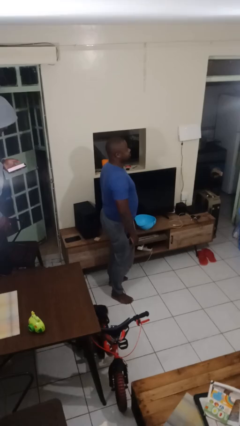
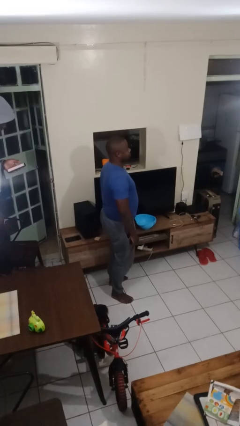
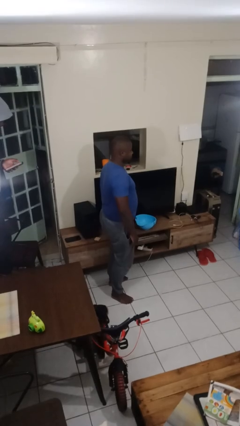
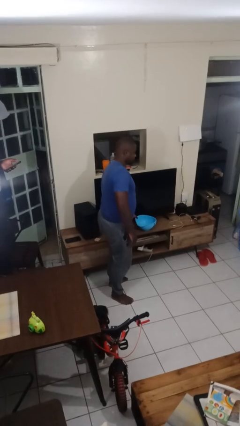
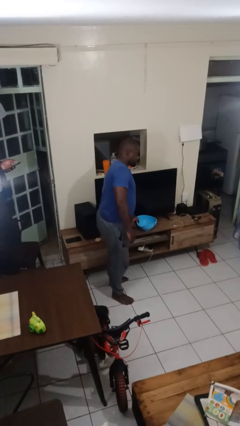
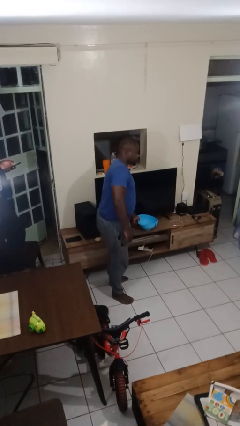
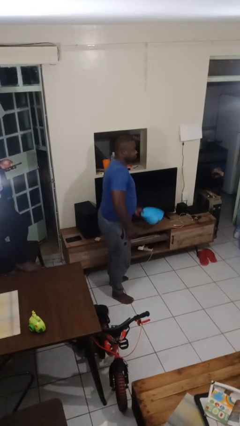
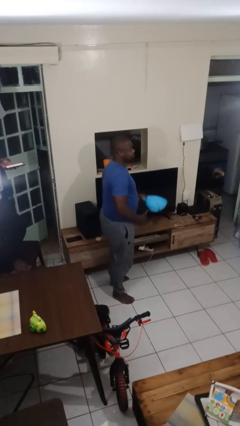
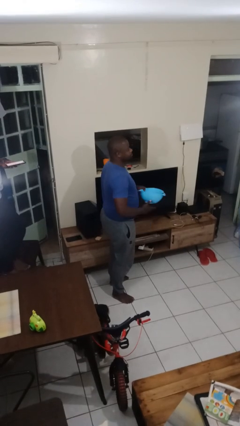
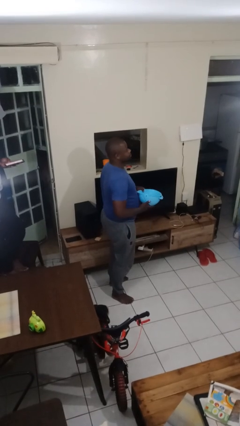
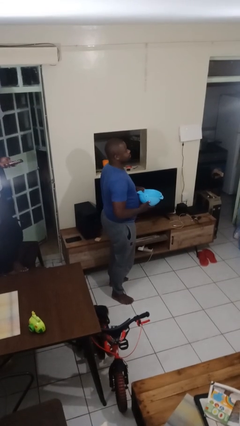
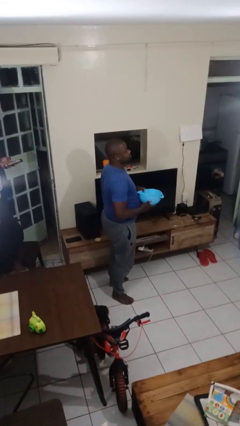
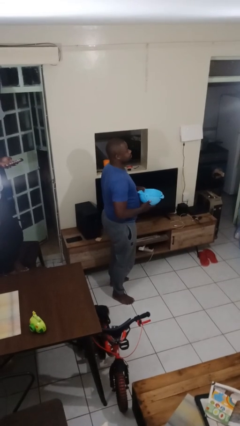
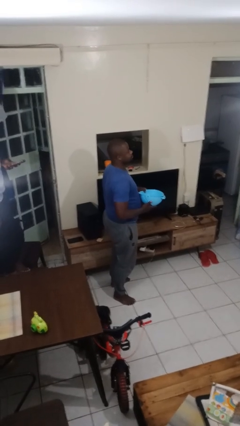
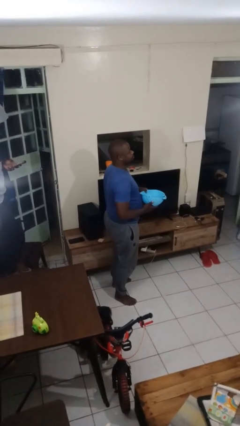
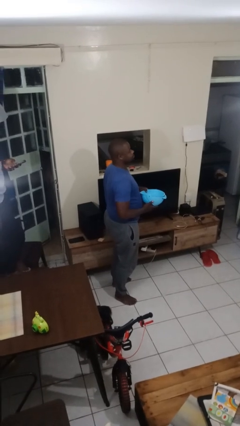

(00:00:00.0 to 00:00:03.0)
person picks up object from countertop

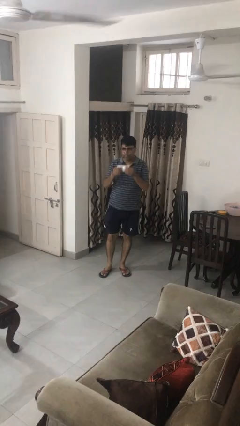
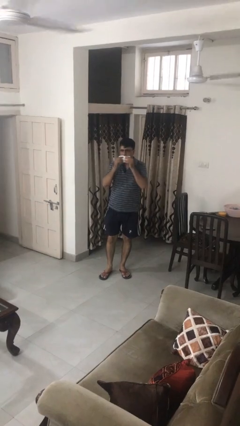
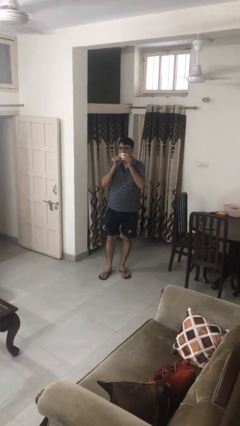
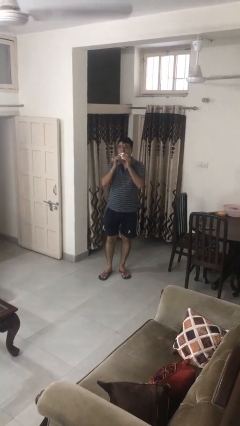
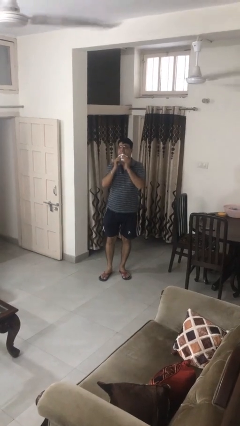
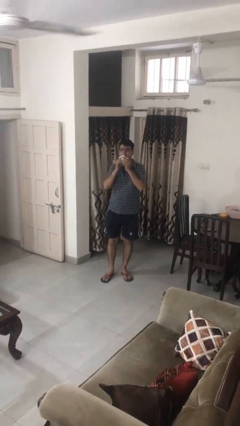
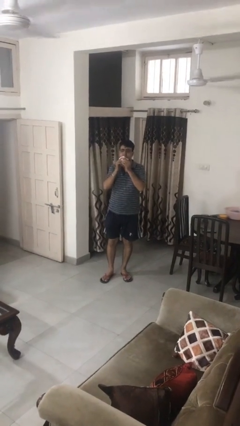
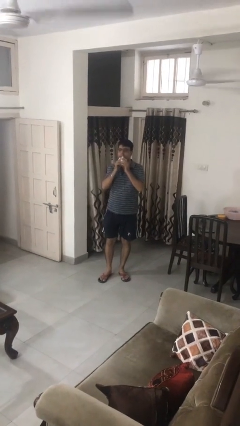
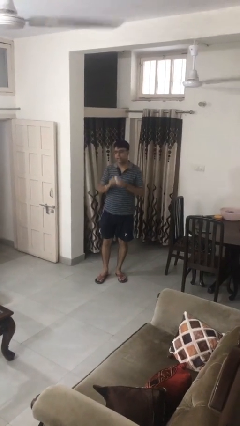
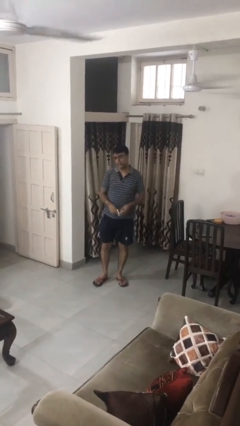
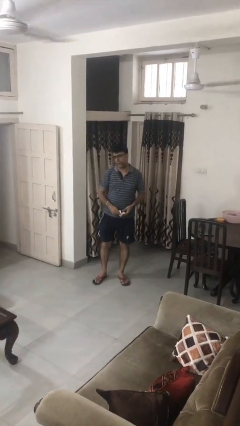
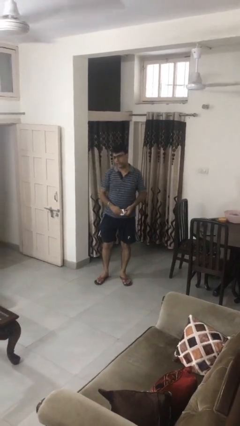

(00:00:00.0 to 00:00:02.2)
person wipes mouth with napkin

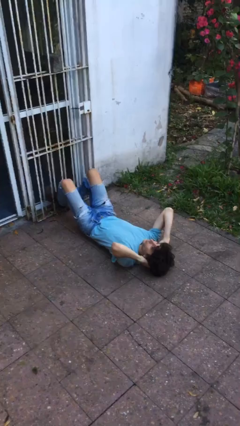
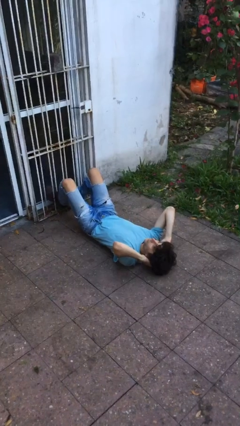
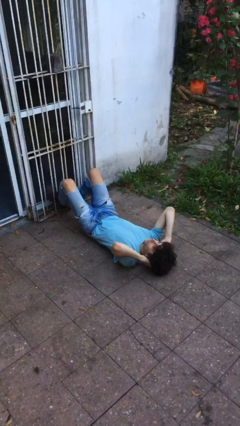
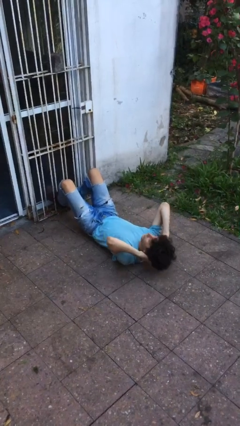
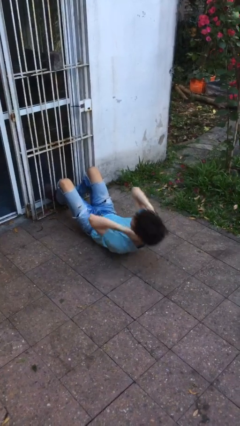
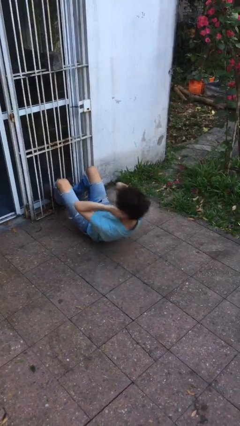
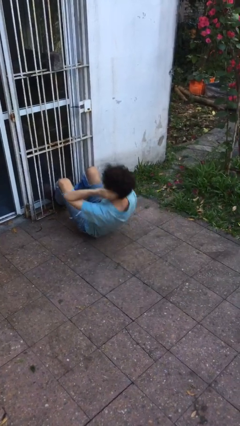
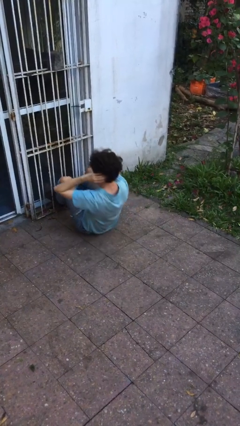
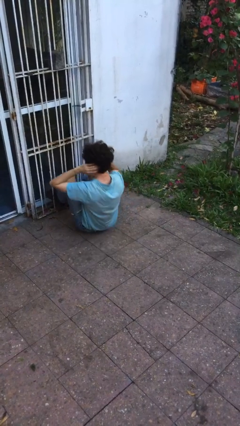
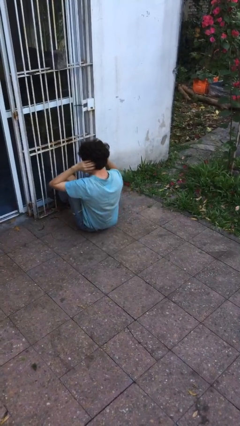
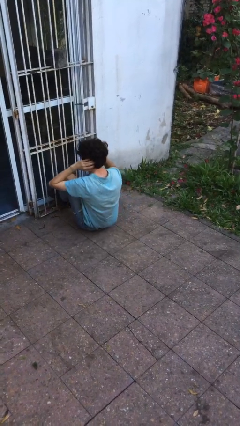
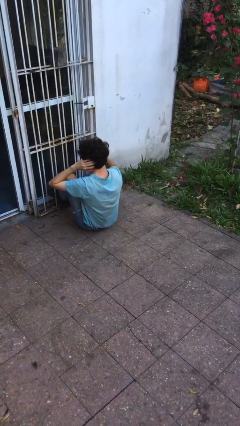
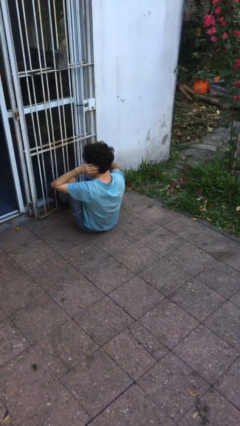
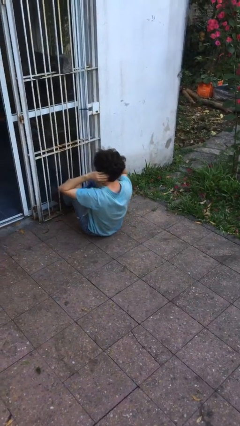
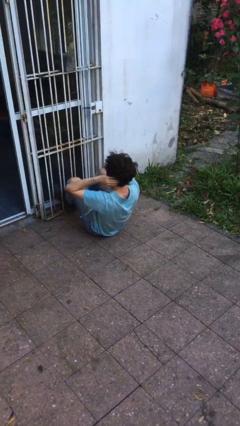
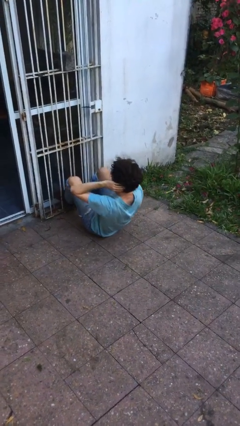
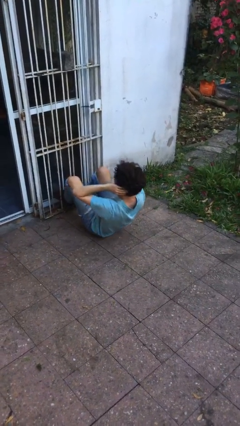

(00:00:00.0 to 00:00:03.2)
person exercises with situp

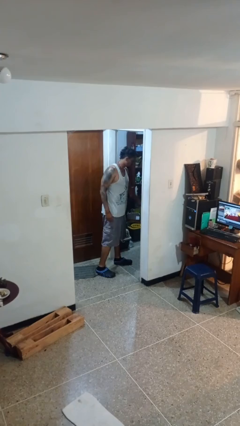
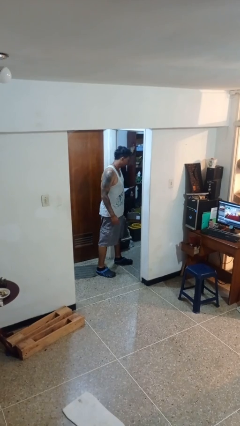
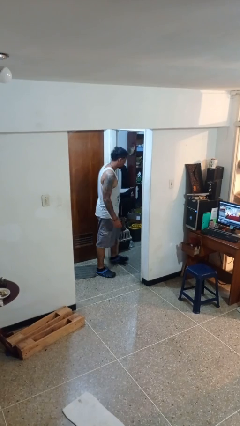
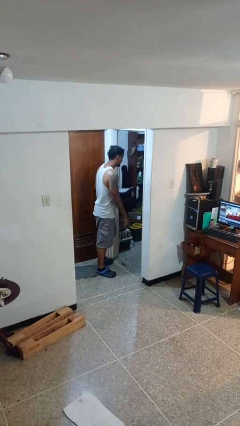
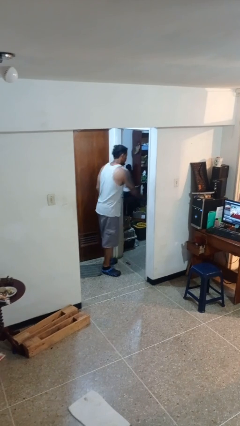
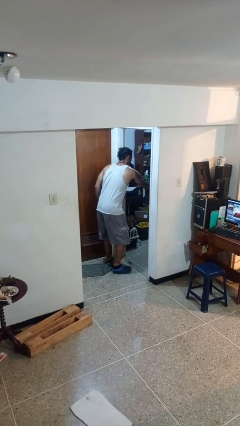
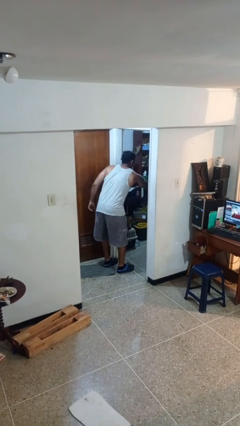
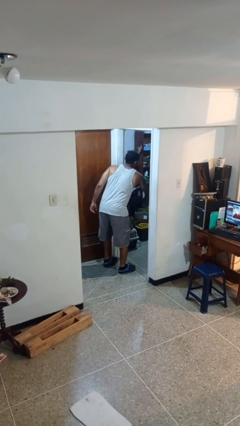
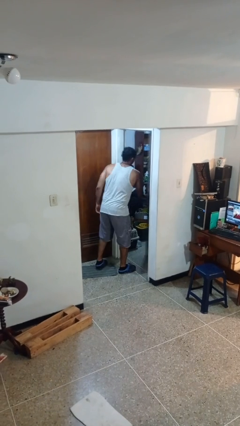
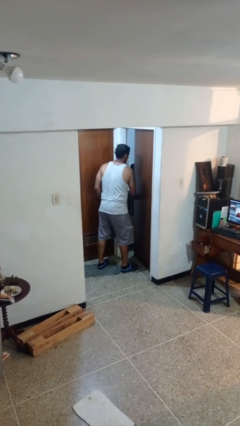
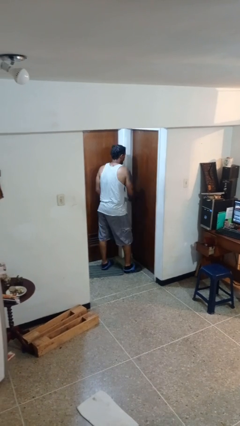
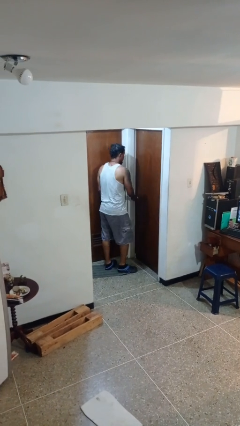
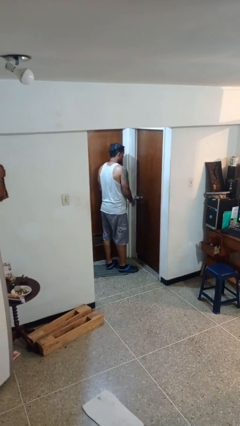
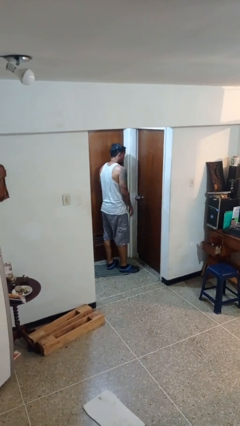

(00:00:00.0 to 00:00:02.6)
person closes gate

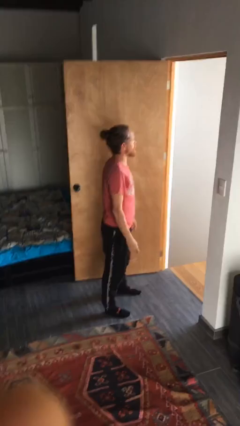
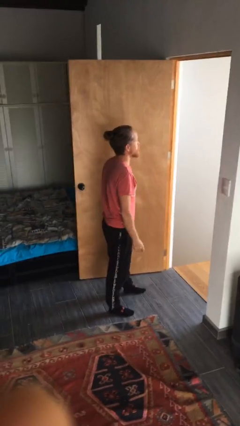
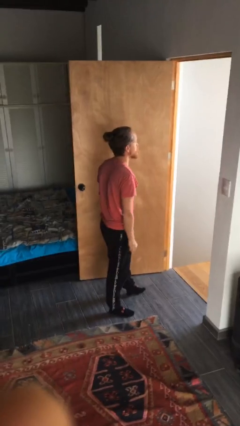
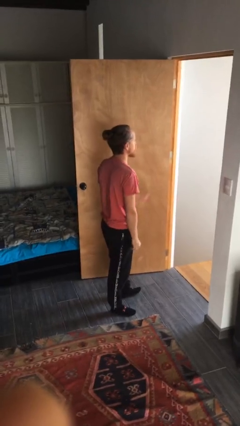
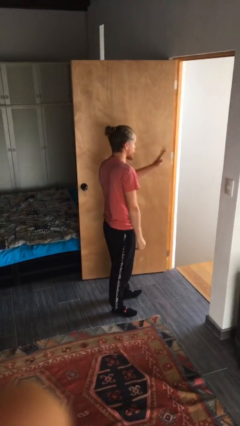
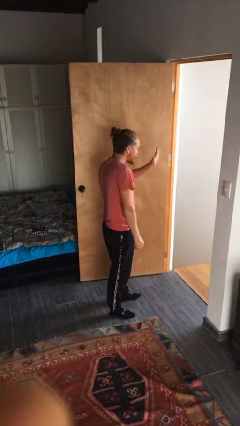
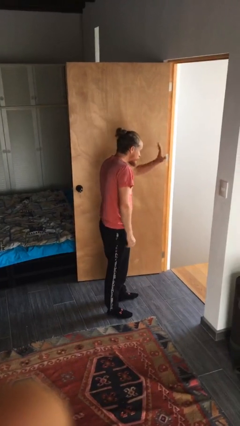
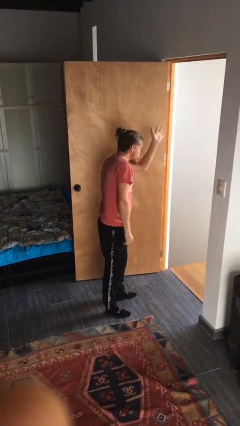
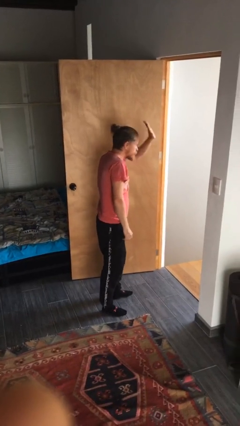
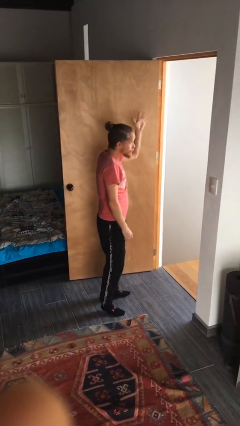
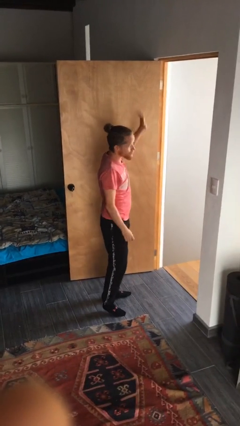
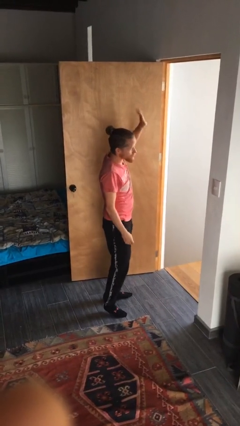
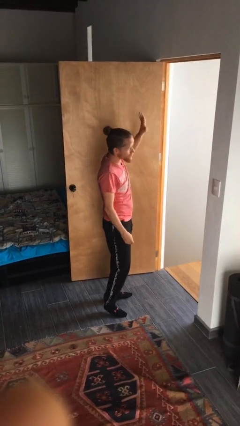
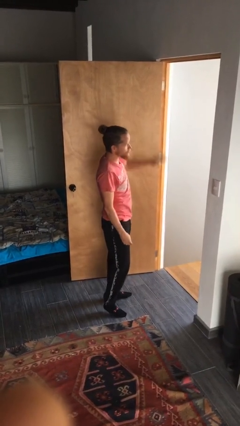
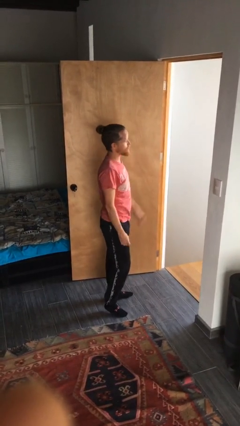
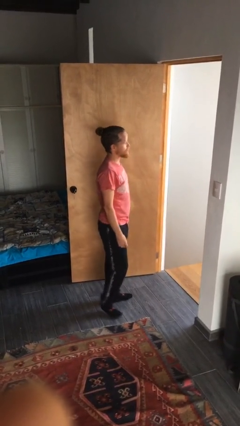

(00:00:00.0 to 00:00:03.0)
person waves at person

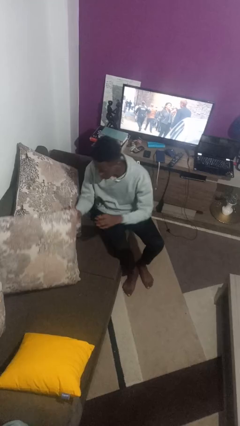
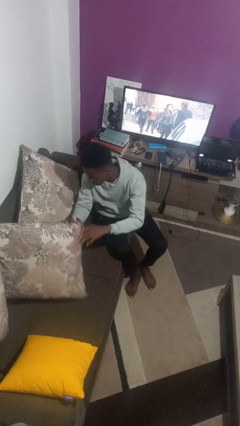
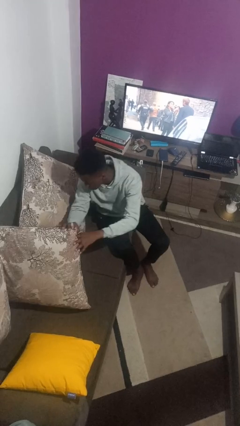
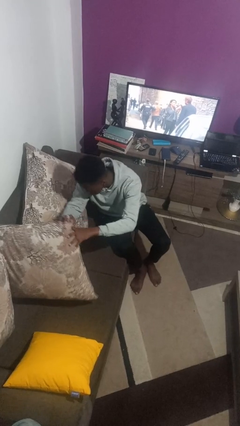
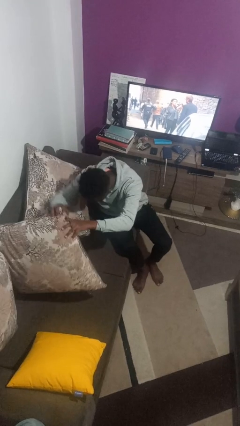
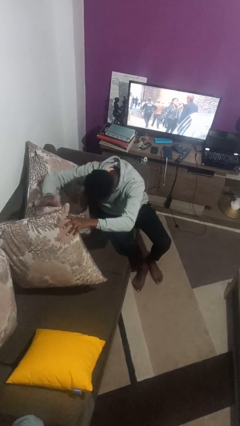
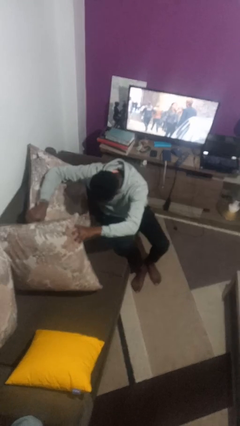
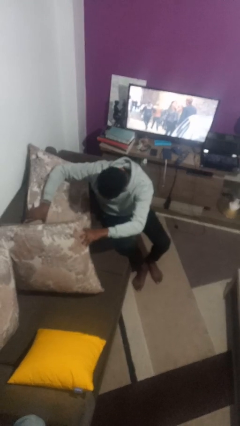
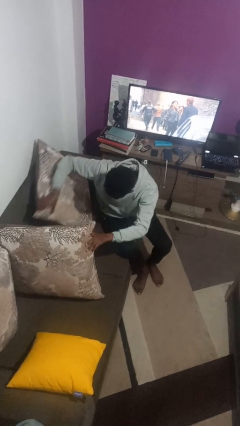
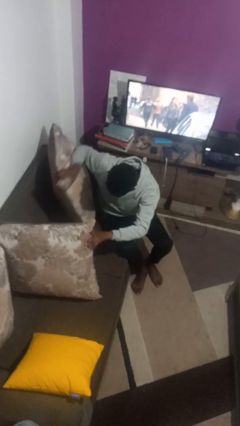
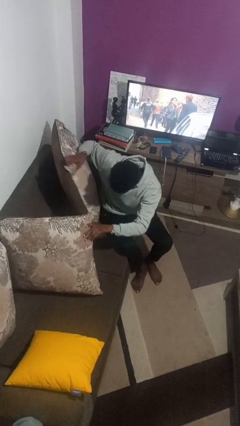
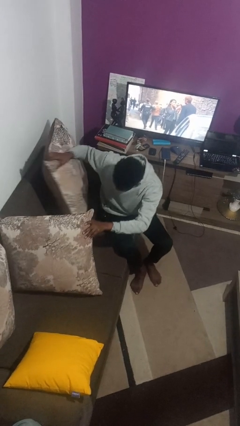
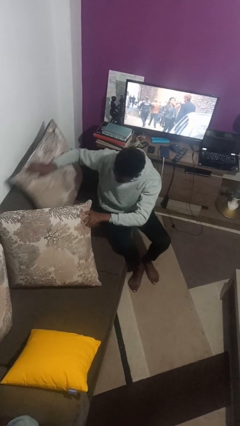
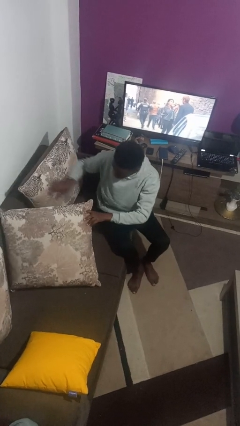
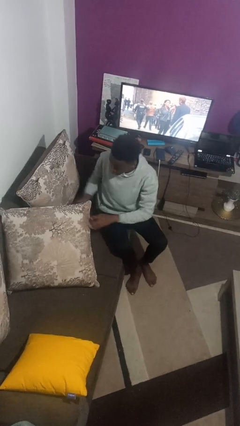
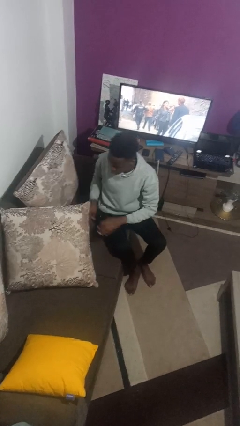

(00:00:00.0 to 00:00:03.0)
person searches in couch

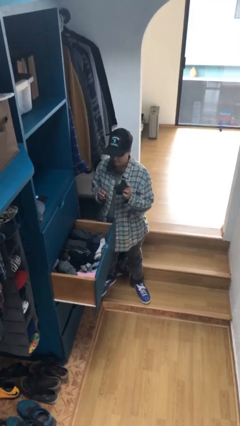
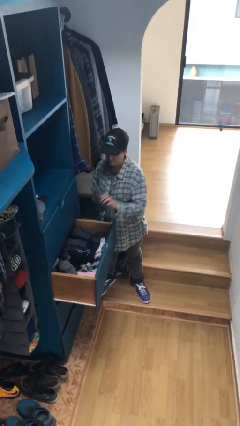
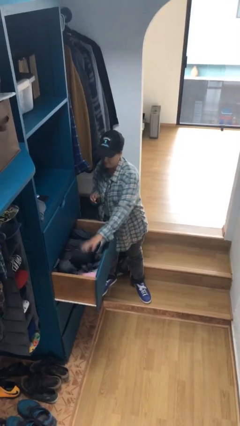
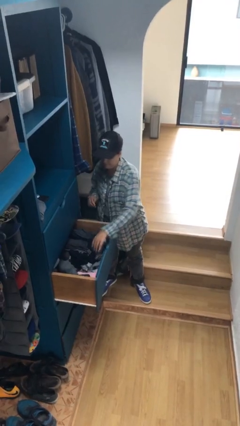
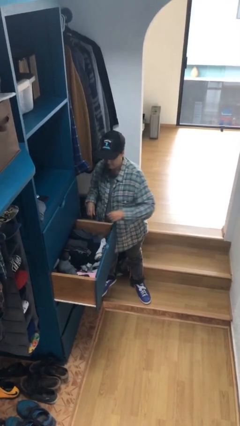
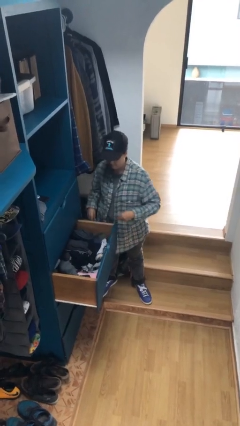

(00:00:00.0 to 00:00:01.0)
person puts clothes into dresser
